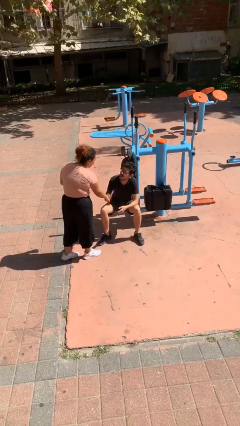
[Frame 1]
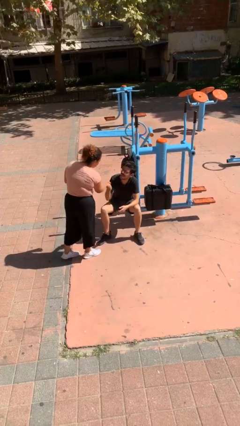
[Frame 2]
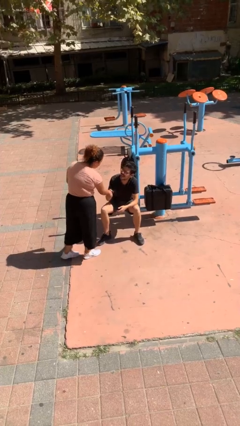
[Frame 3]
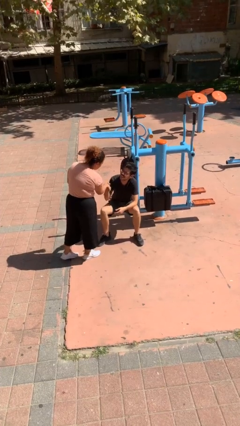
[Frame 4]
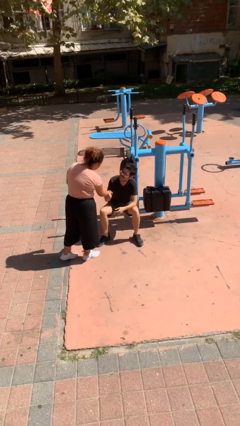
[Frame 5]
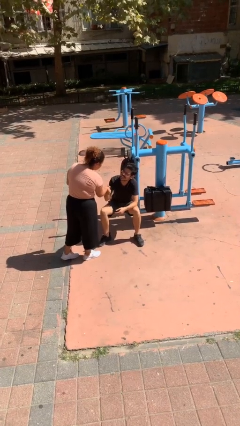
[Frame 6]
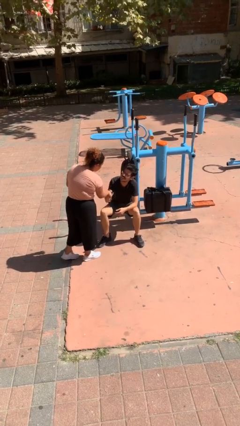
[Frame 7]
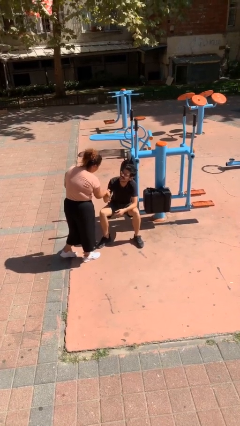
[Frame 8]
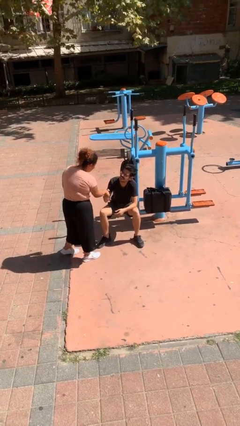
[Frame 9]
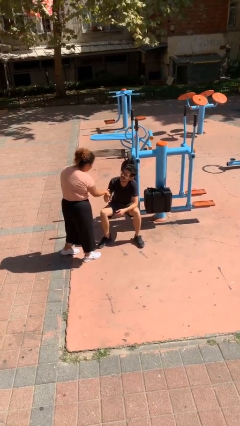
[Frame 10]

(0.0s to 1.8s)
person shakes hand

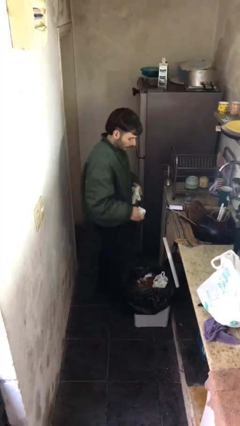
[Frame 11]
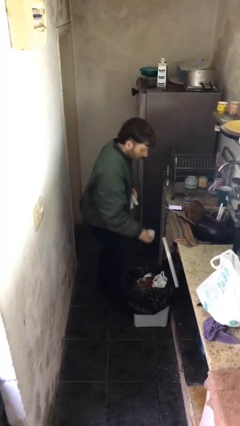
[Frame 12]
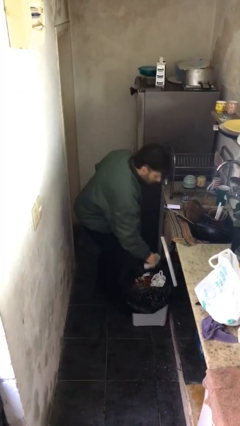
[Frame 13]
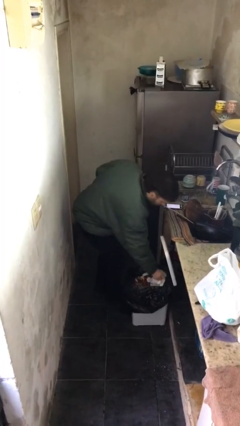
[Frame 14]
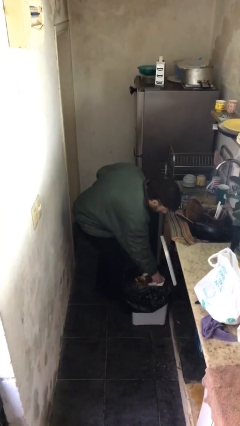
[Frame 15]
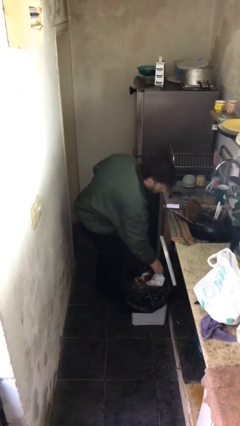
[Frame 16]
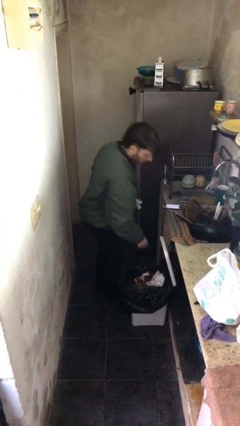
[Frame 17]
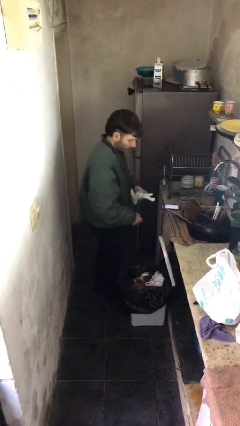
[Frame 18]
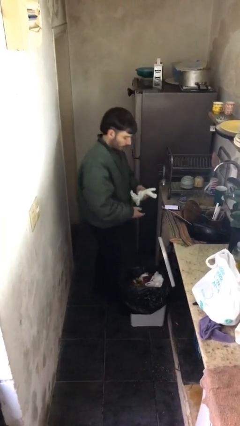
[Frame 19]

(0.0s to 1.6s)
person discards trash

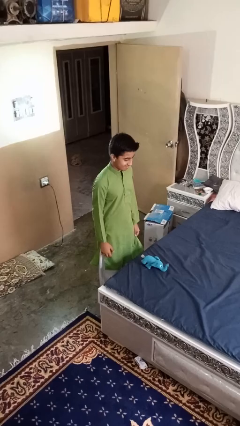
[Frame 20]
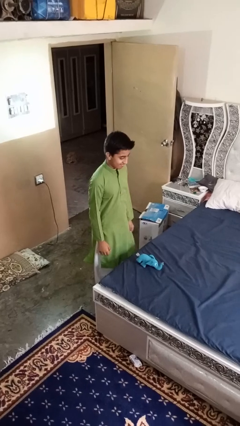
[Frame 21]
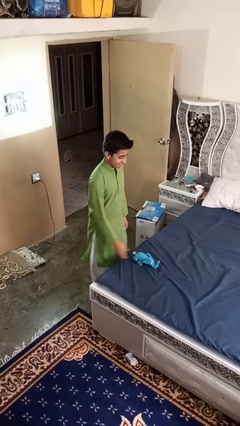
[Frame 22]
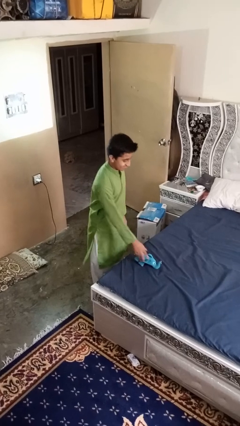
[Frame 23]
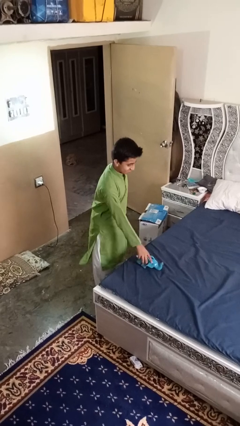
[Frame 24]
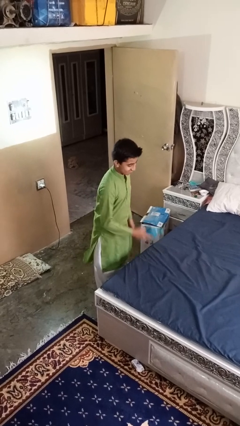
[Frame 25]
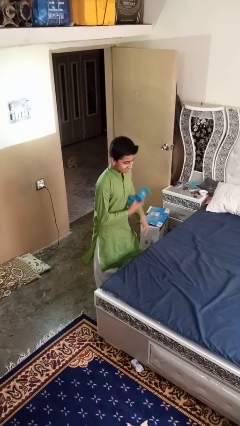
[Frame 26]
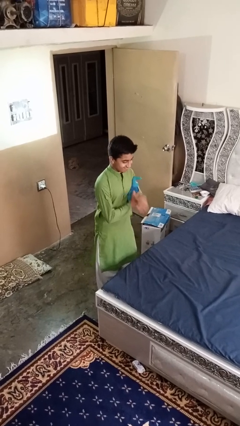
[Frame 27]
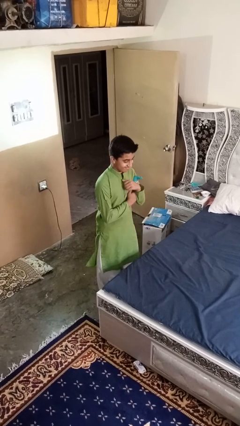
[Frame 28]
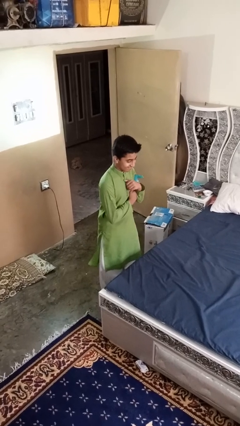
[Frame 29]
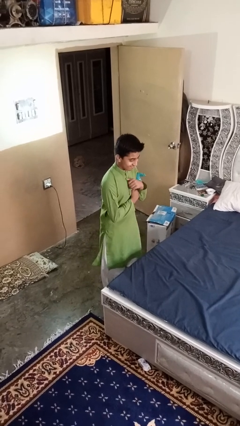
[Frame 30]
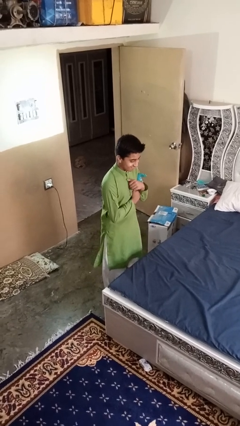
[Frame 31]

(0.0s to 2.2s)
person hugs stuffed animal

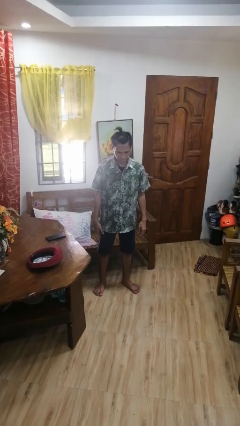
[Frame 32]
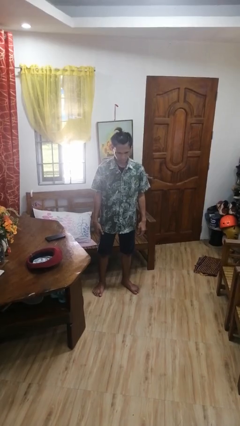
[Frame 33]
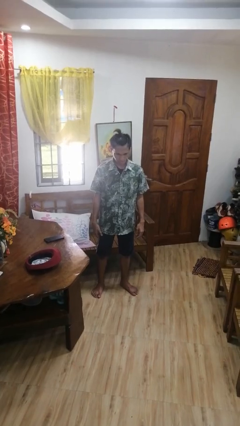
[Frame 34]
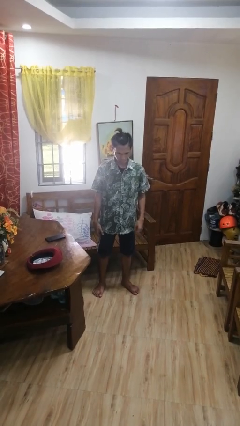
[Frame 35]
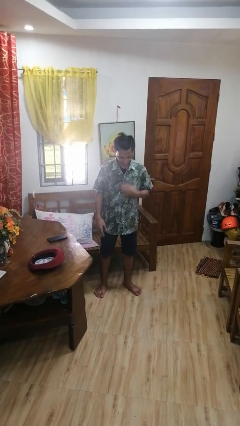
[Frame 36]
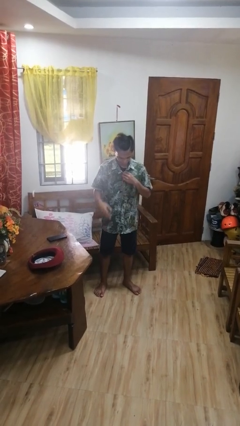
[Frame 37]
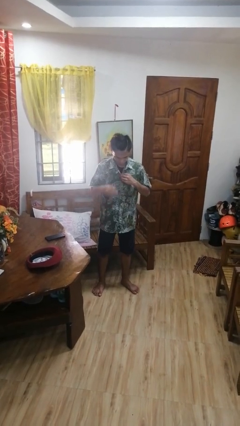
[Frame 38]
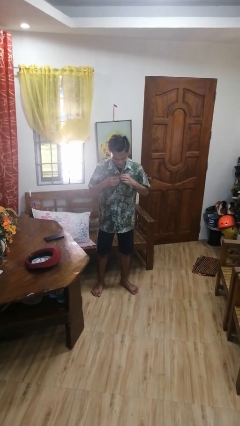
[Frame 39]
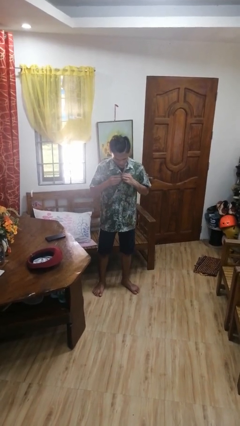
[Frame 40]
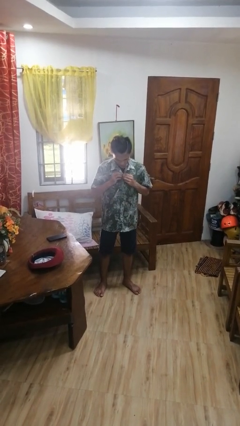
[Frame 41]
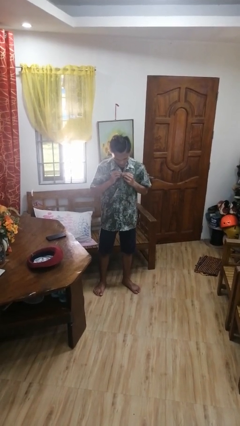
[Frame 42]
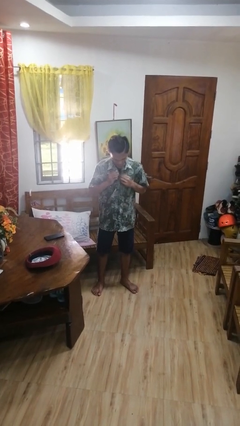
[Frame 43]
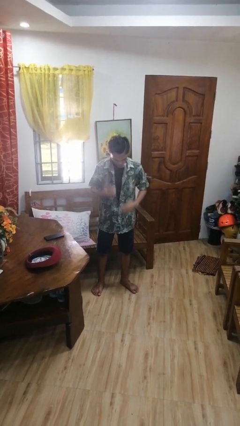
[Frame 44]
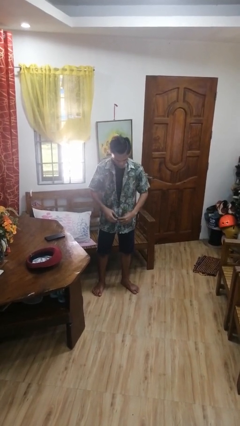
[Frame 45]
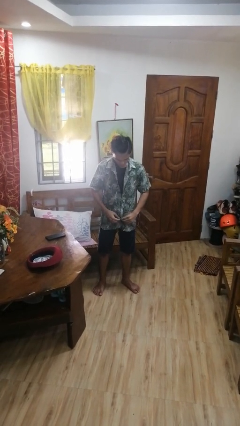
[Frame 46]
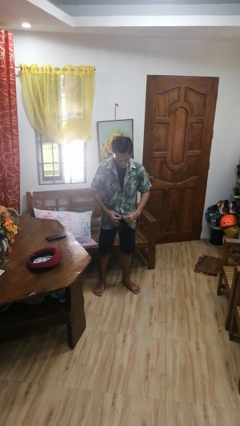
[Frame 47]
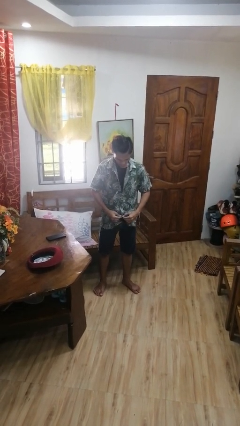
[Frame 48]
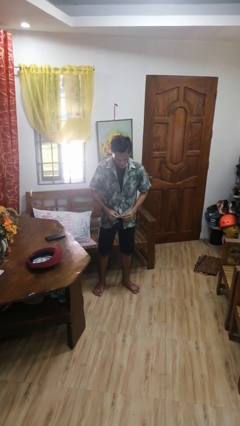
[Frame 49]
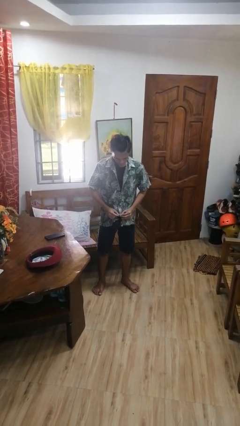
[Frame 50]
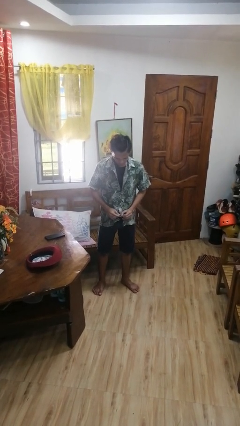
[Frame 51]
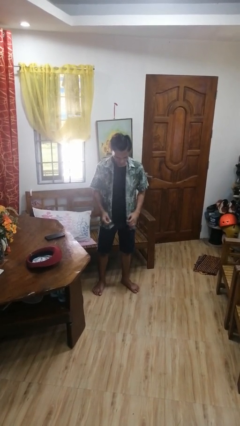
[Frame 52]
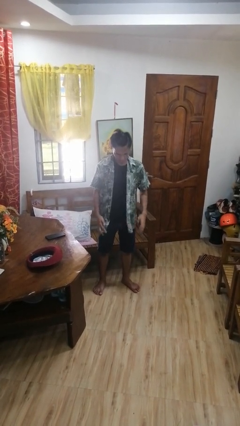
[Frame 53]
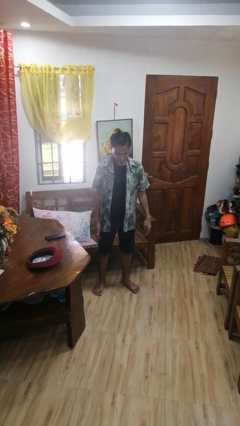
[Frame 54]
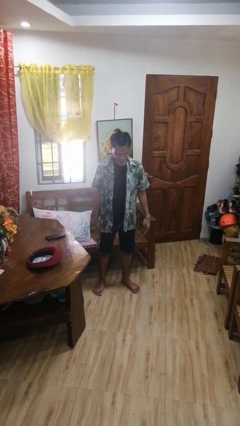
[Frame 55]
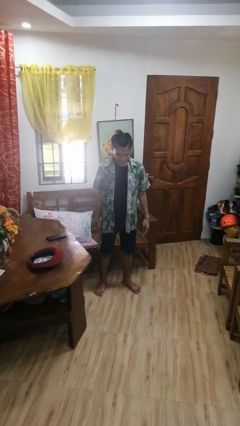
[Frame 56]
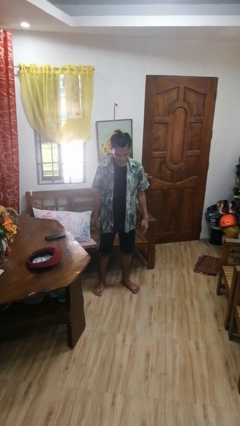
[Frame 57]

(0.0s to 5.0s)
person unbuttons shirt

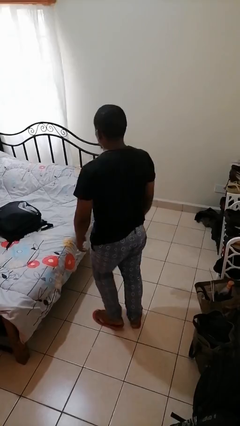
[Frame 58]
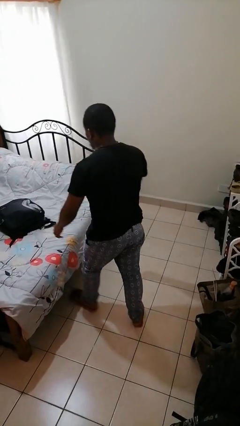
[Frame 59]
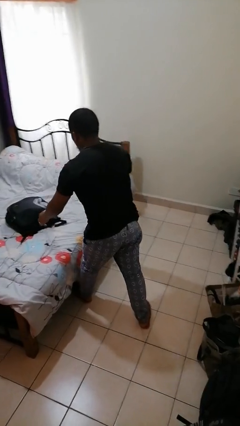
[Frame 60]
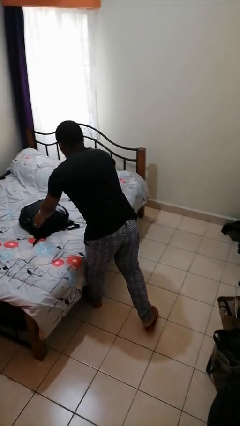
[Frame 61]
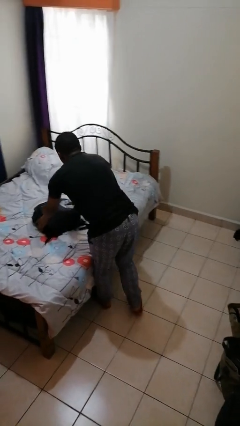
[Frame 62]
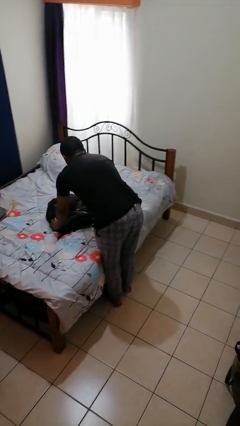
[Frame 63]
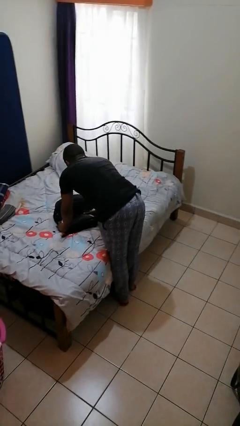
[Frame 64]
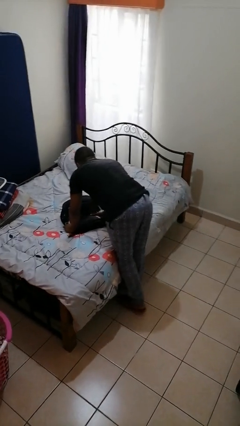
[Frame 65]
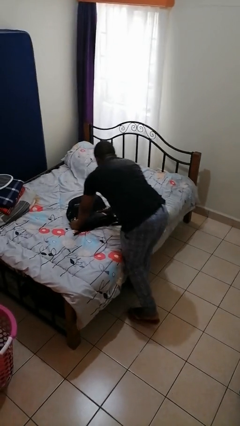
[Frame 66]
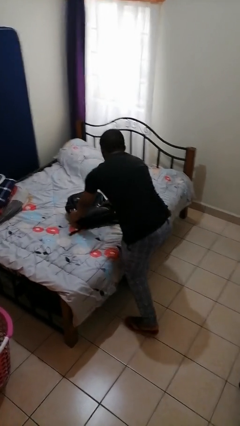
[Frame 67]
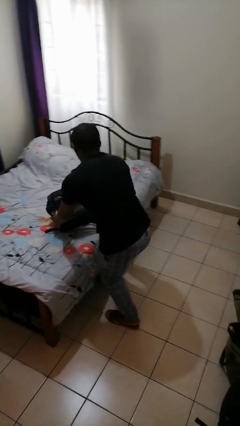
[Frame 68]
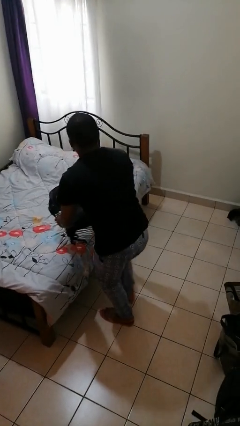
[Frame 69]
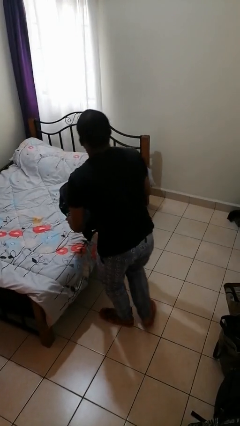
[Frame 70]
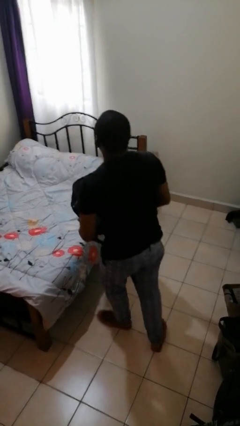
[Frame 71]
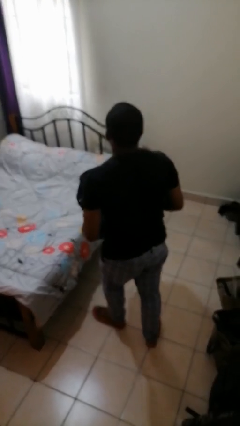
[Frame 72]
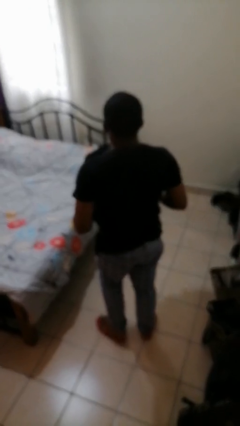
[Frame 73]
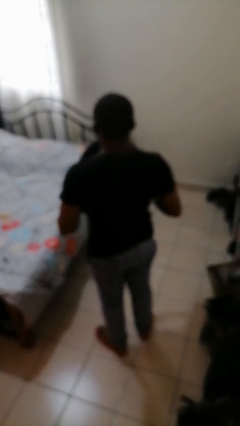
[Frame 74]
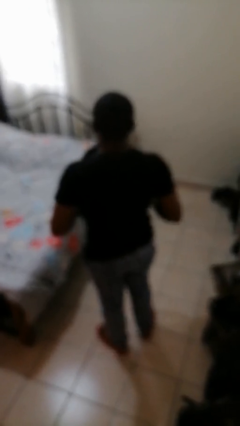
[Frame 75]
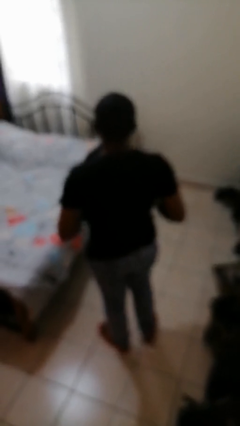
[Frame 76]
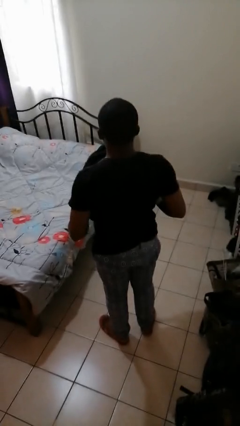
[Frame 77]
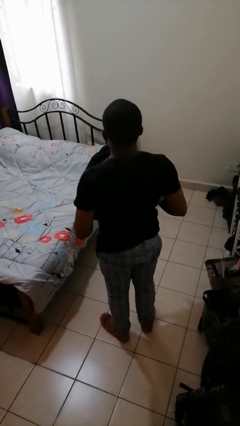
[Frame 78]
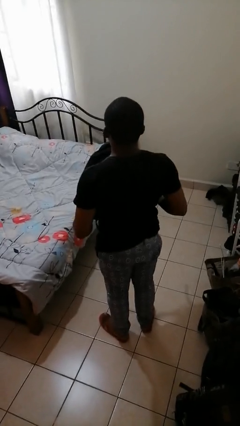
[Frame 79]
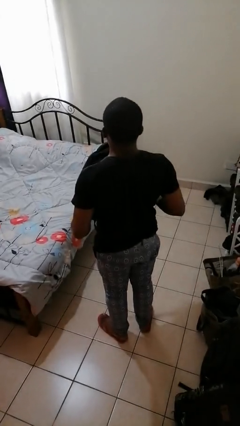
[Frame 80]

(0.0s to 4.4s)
person picks up object from bed

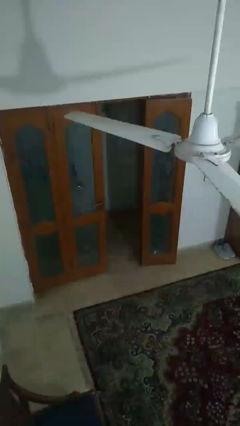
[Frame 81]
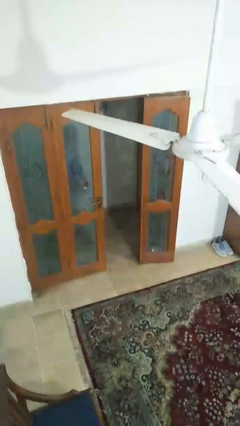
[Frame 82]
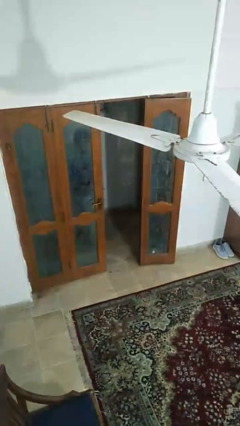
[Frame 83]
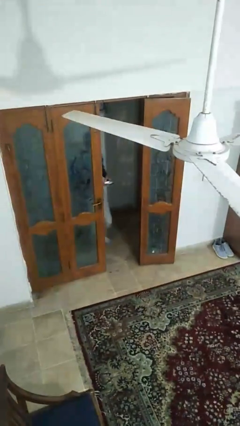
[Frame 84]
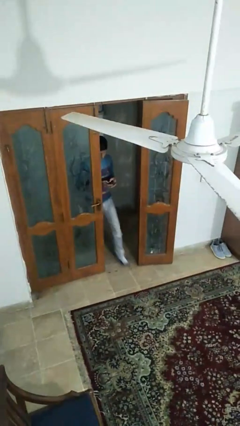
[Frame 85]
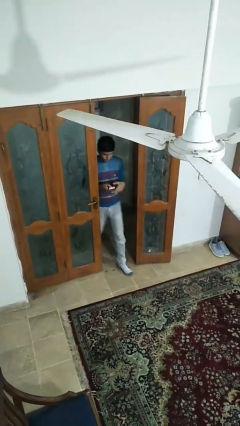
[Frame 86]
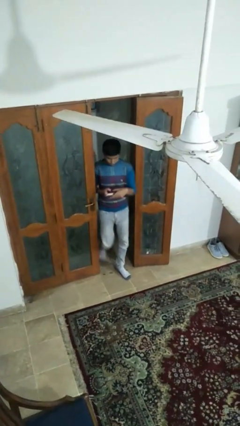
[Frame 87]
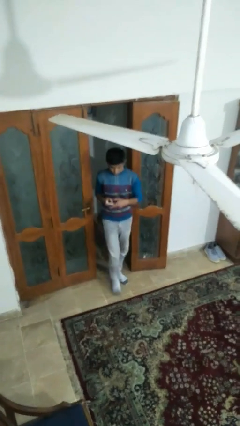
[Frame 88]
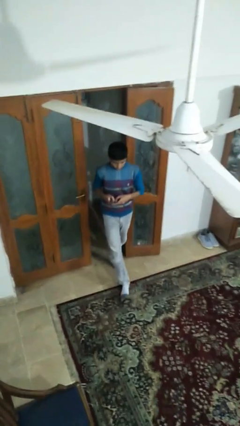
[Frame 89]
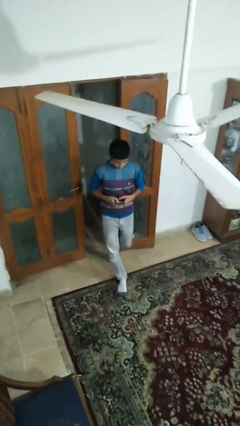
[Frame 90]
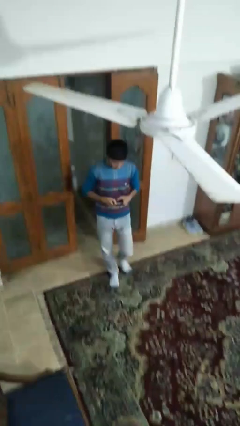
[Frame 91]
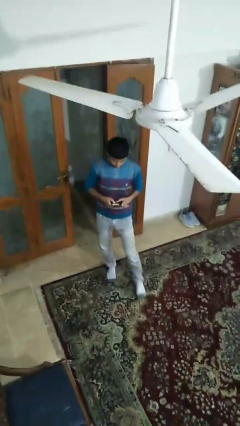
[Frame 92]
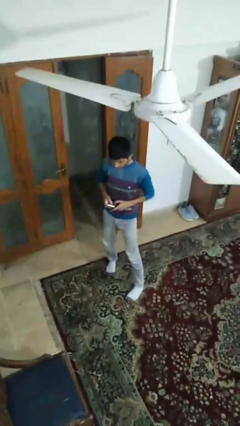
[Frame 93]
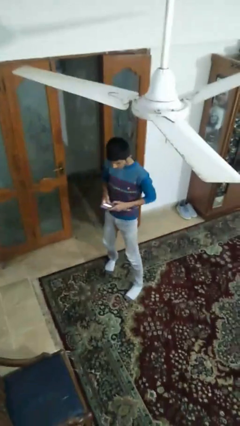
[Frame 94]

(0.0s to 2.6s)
person opens facility door
